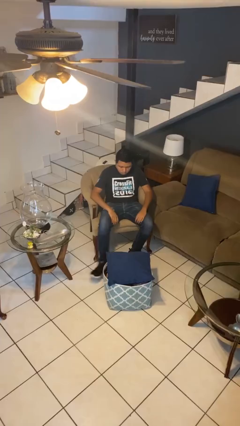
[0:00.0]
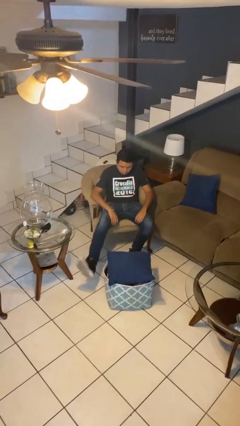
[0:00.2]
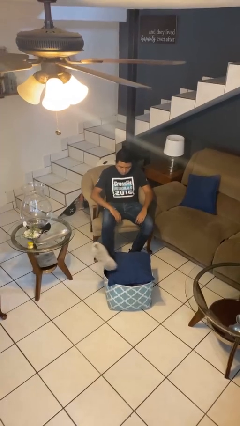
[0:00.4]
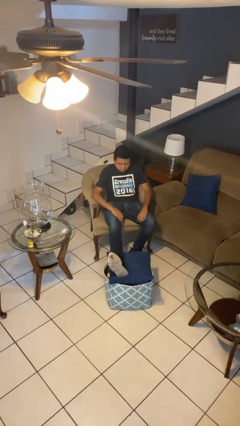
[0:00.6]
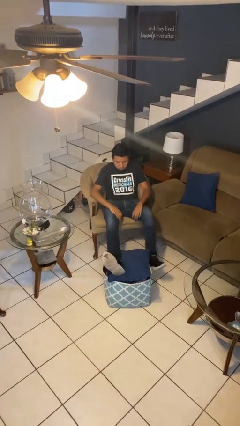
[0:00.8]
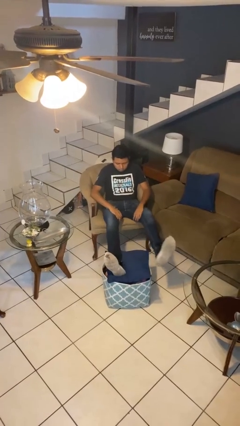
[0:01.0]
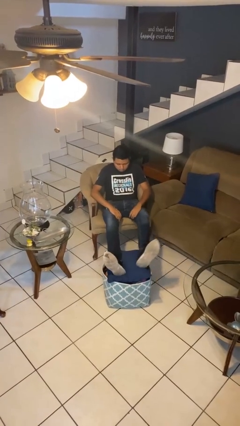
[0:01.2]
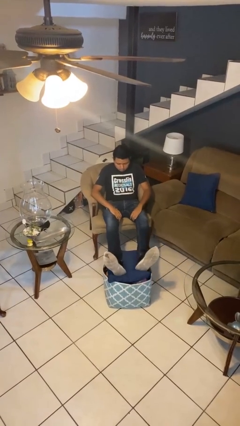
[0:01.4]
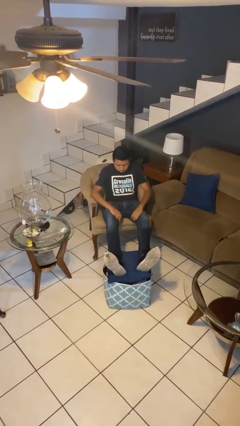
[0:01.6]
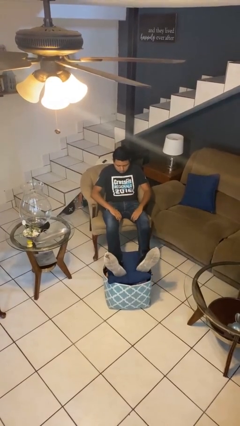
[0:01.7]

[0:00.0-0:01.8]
person puts feet up

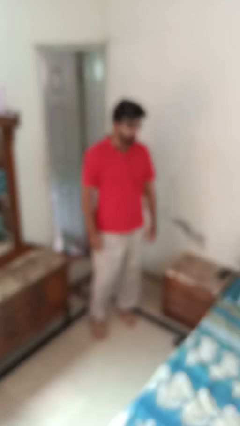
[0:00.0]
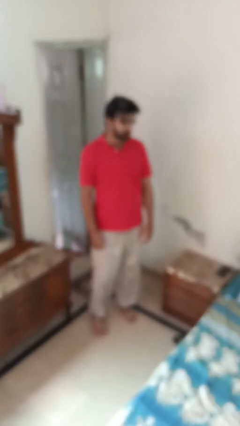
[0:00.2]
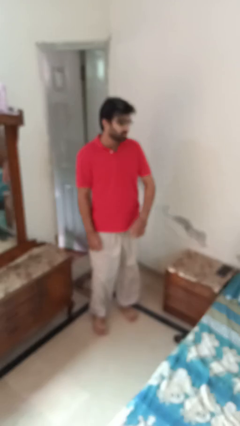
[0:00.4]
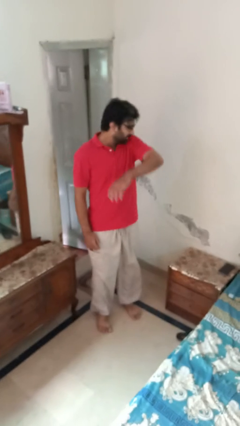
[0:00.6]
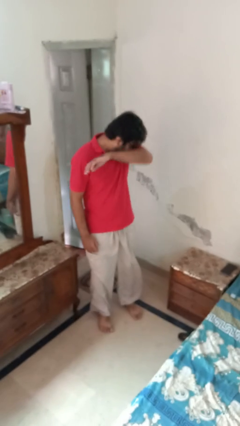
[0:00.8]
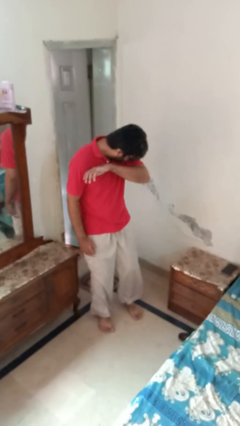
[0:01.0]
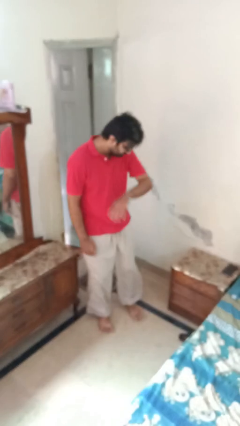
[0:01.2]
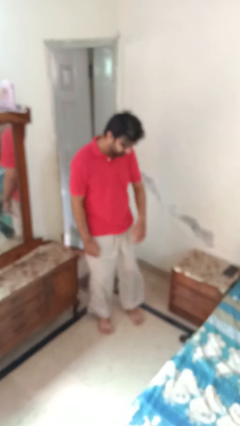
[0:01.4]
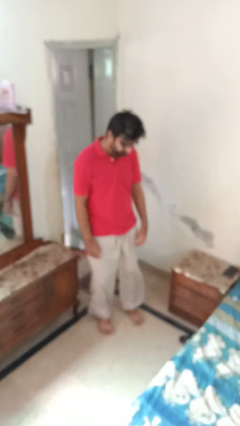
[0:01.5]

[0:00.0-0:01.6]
person sneezes into arm

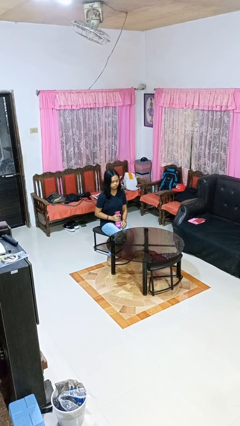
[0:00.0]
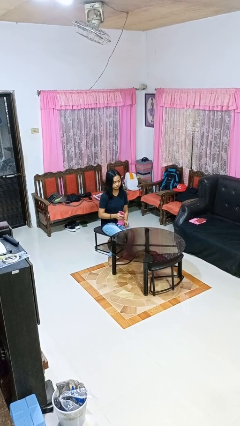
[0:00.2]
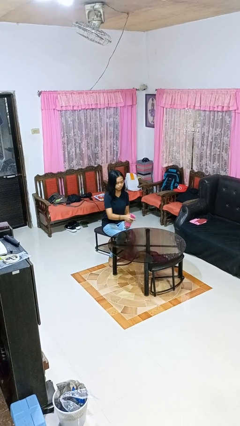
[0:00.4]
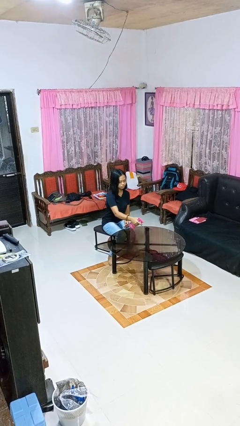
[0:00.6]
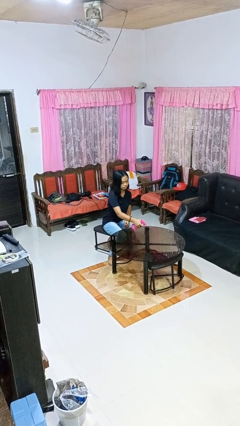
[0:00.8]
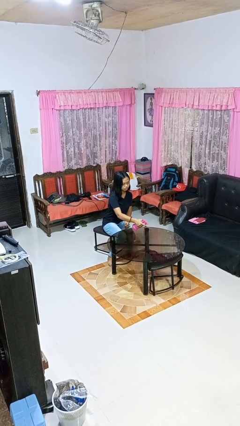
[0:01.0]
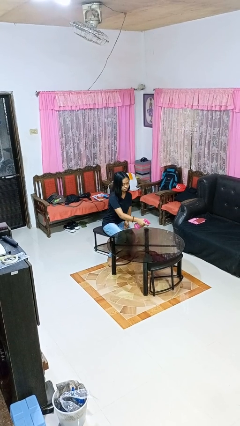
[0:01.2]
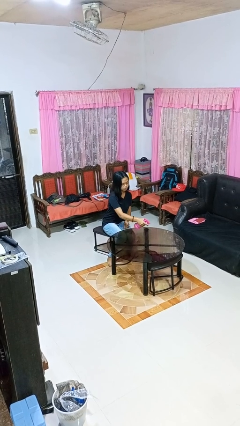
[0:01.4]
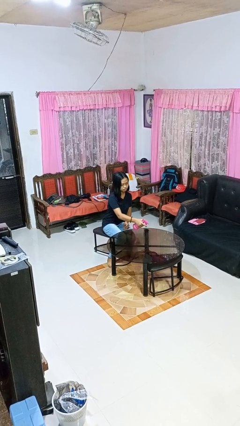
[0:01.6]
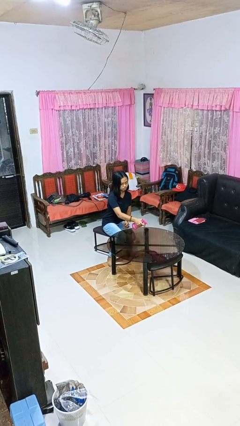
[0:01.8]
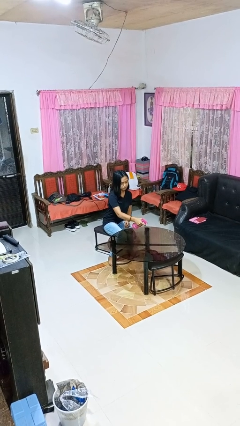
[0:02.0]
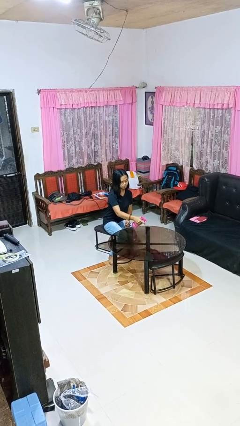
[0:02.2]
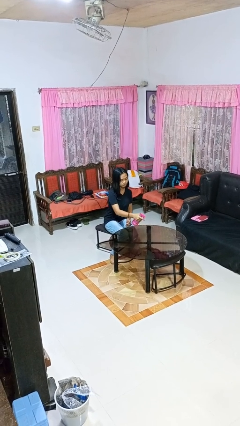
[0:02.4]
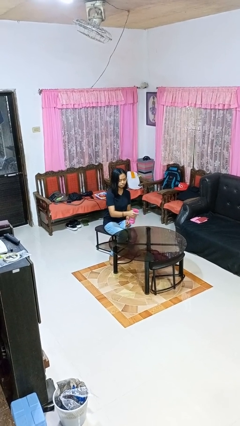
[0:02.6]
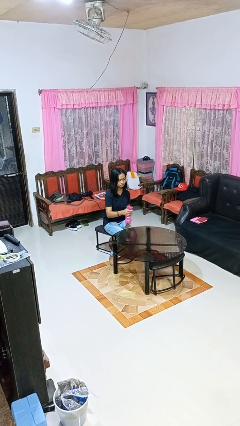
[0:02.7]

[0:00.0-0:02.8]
person sprays from bottle

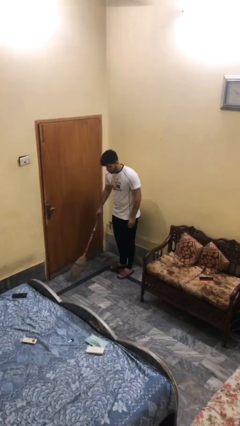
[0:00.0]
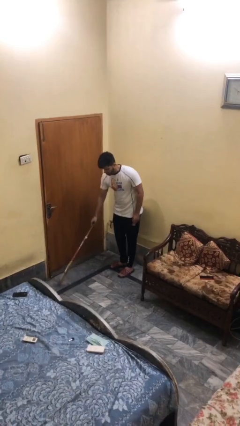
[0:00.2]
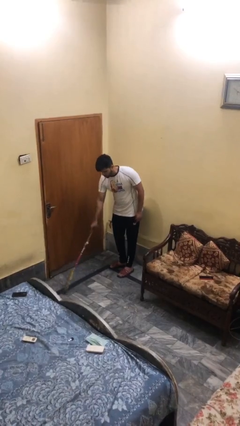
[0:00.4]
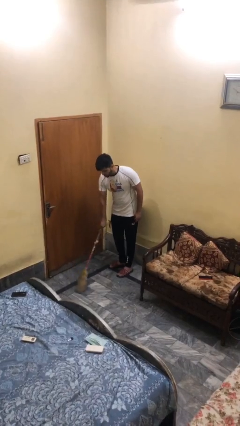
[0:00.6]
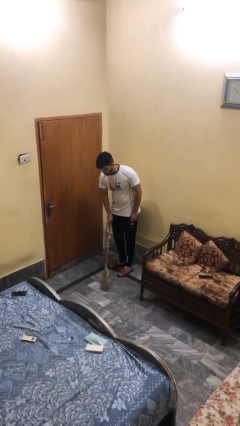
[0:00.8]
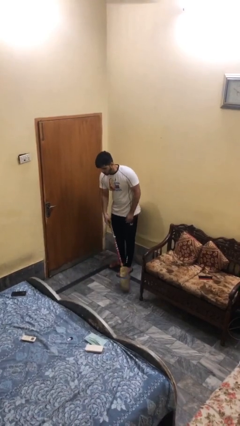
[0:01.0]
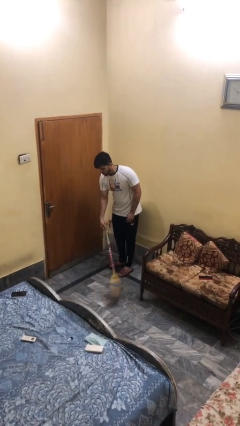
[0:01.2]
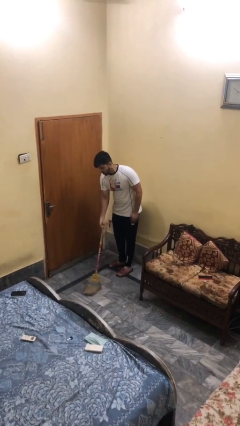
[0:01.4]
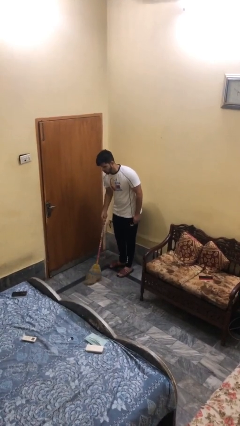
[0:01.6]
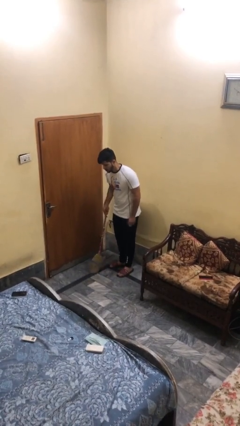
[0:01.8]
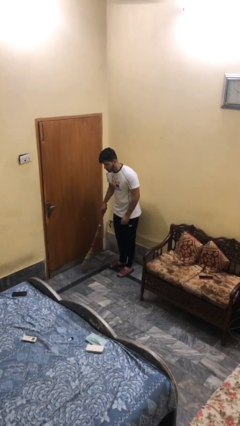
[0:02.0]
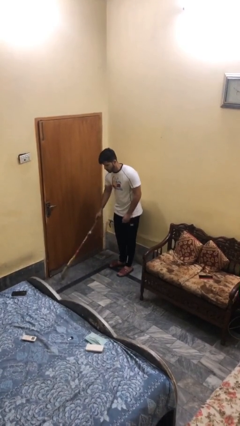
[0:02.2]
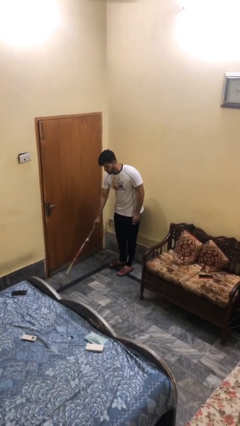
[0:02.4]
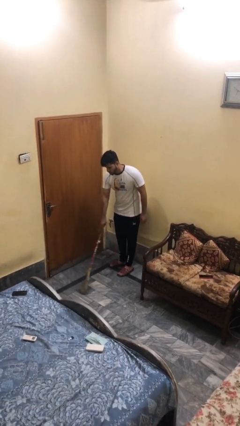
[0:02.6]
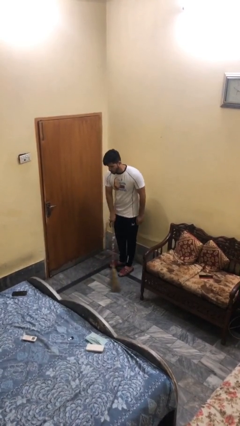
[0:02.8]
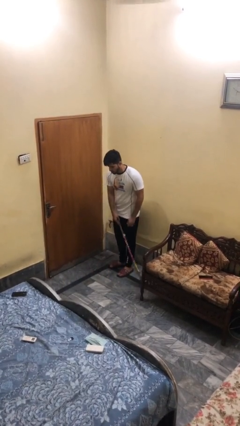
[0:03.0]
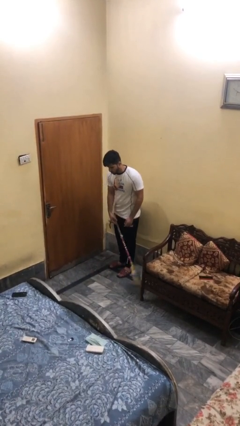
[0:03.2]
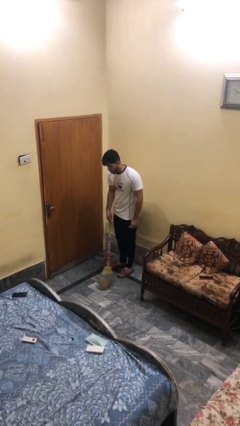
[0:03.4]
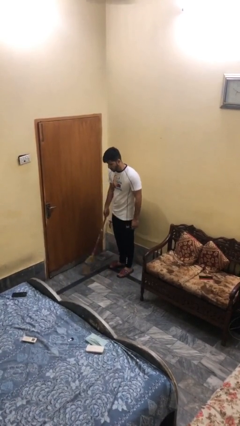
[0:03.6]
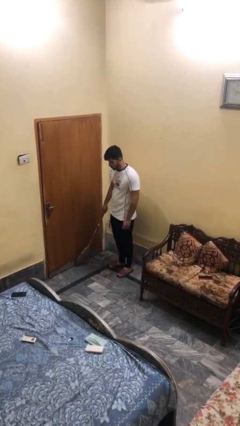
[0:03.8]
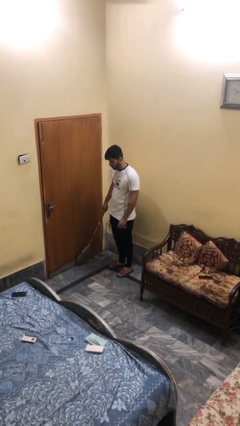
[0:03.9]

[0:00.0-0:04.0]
person sweeps floor

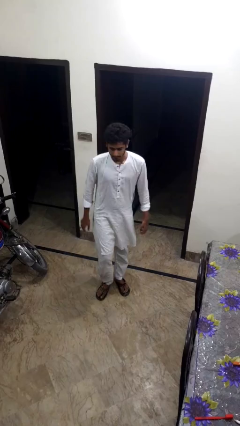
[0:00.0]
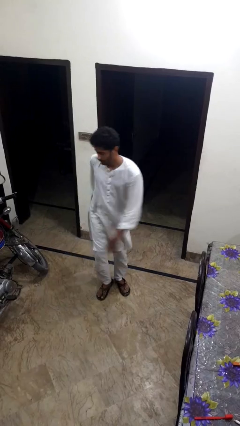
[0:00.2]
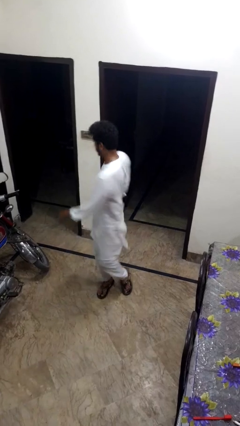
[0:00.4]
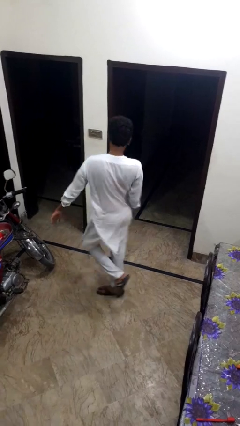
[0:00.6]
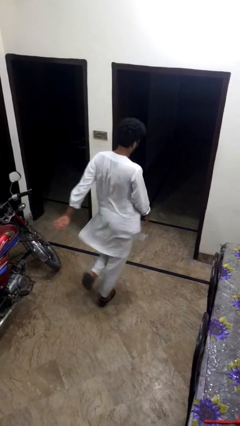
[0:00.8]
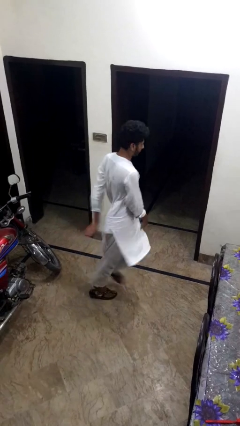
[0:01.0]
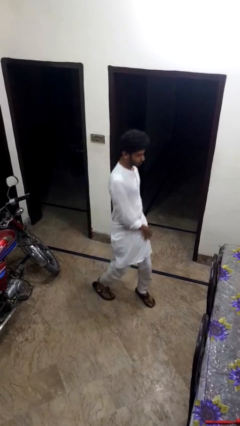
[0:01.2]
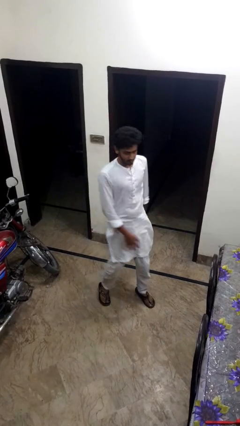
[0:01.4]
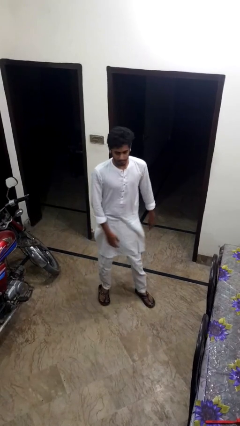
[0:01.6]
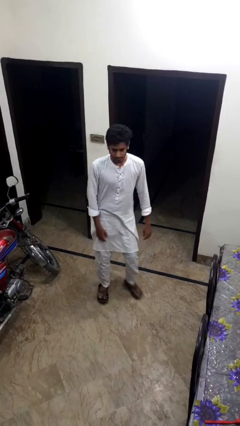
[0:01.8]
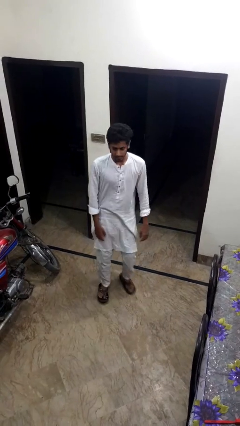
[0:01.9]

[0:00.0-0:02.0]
person twirls

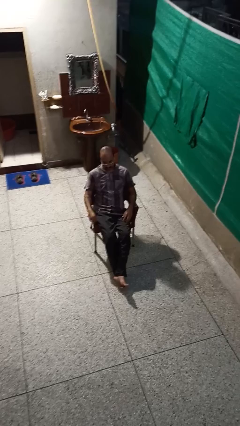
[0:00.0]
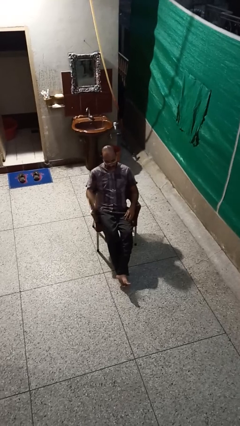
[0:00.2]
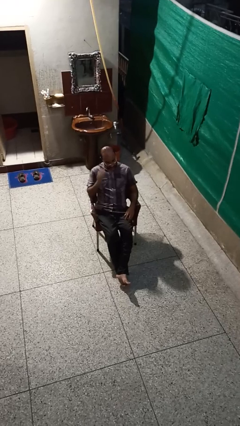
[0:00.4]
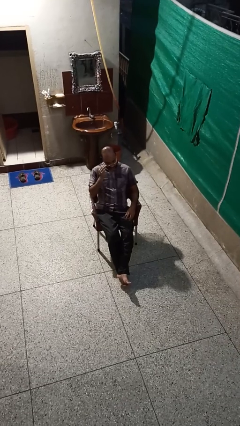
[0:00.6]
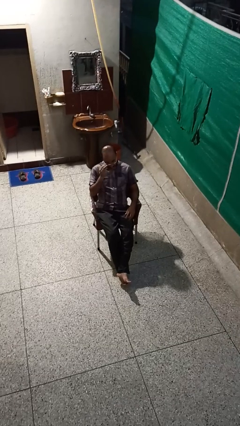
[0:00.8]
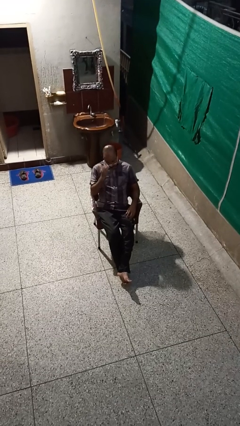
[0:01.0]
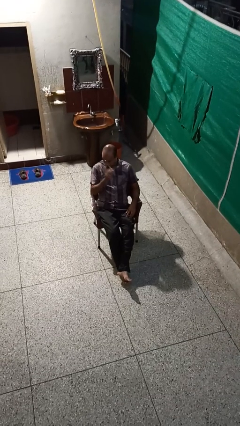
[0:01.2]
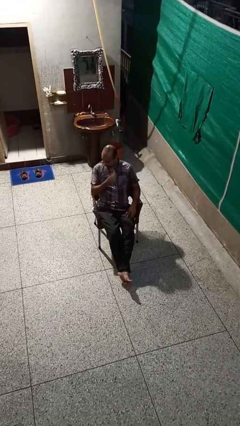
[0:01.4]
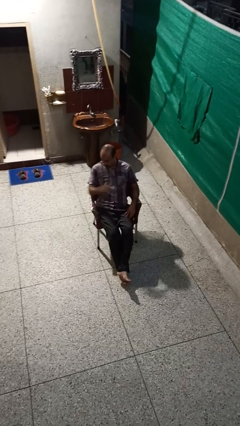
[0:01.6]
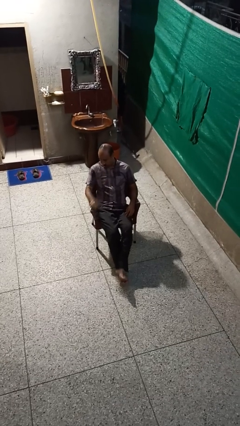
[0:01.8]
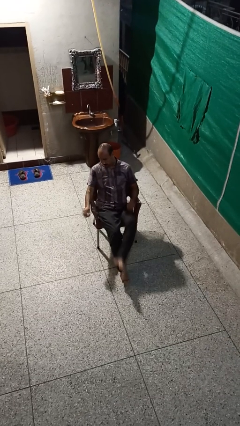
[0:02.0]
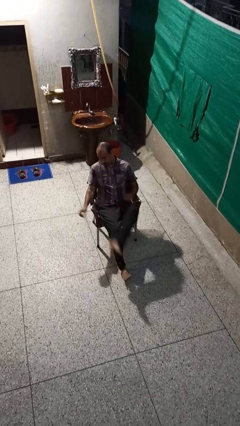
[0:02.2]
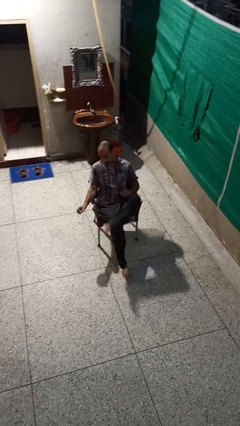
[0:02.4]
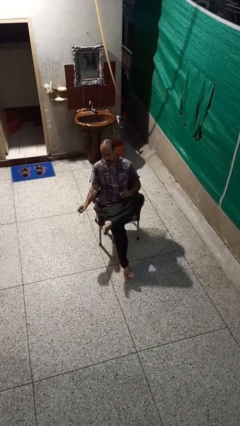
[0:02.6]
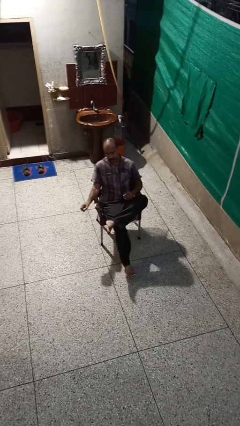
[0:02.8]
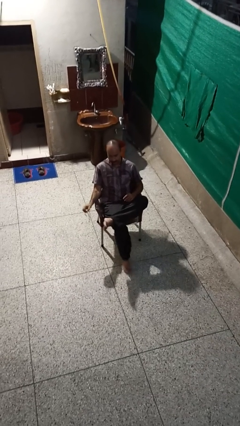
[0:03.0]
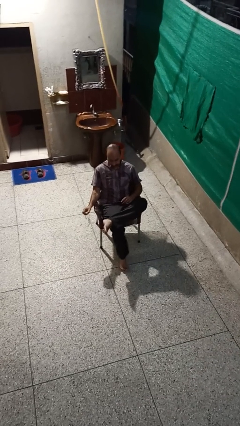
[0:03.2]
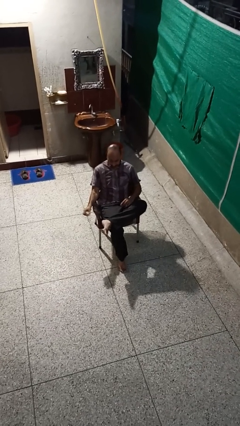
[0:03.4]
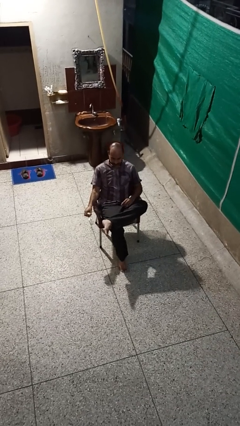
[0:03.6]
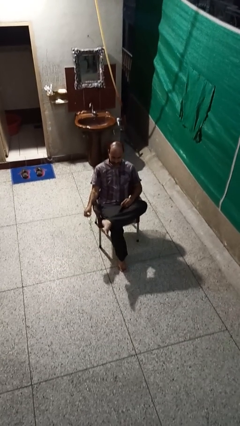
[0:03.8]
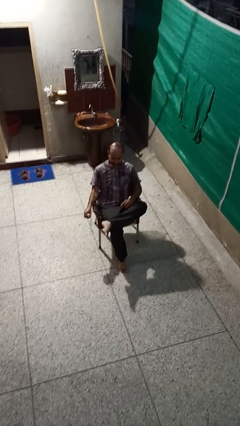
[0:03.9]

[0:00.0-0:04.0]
person takes off glasses

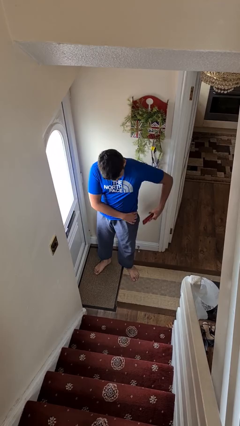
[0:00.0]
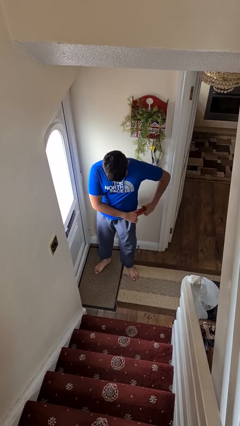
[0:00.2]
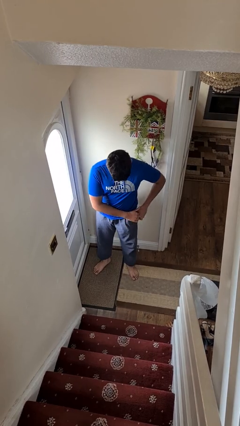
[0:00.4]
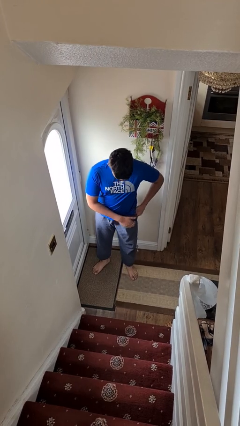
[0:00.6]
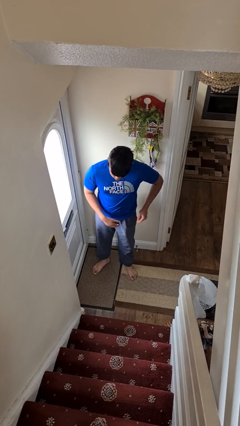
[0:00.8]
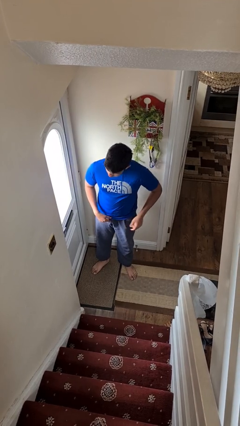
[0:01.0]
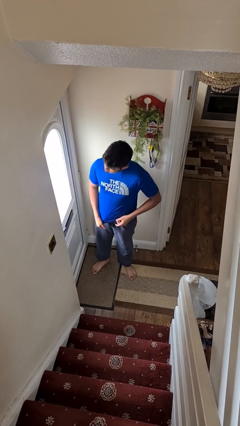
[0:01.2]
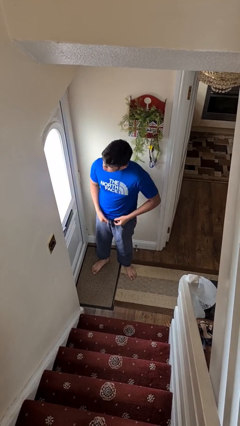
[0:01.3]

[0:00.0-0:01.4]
person puts phone into pocket
